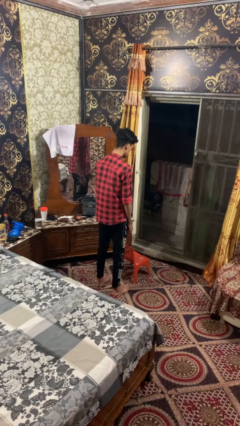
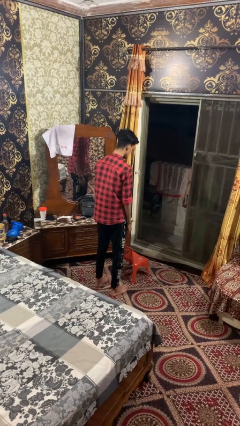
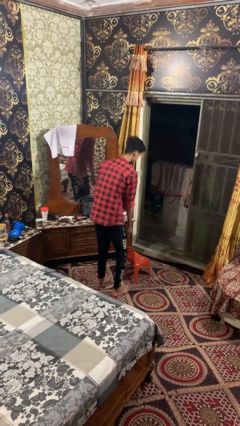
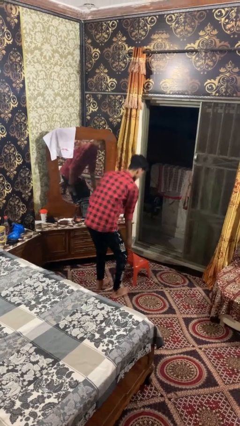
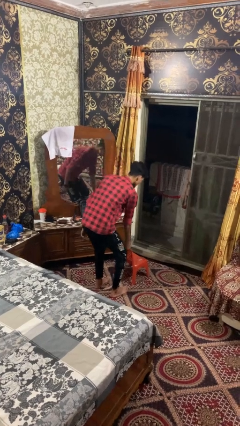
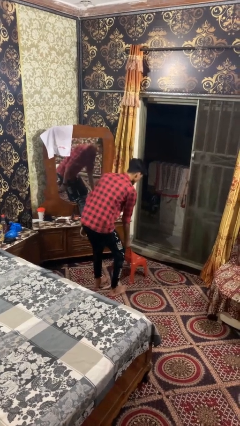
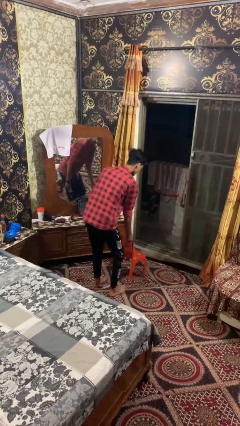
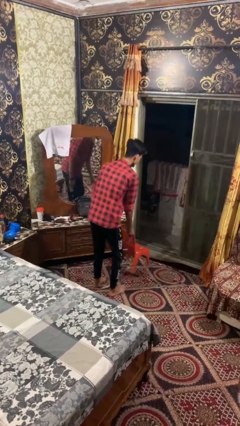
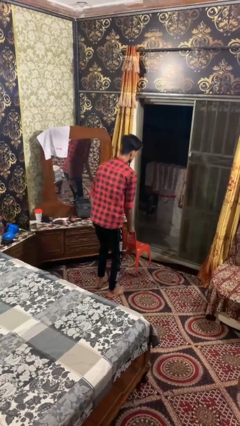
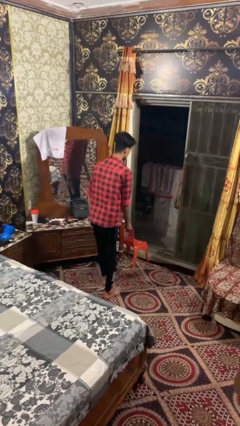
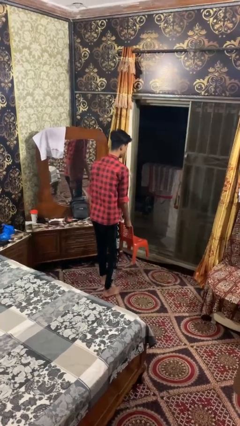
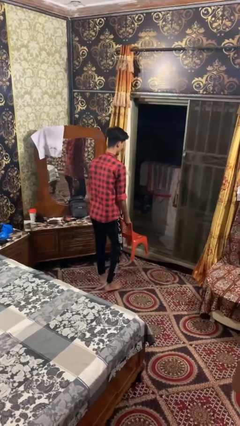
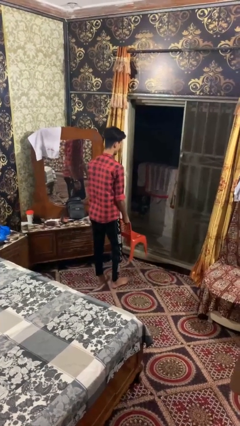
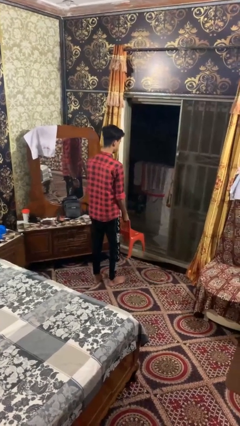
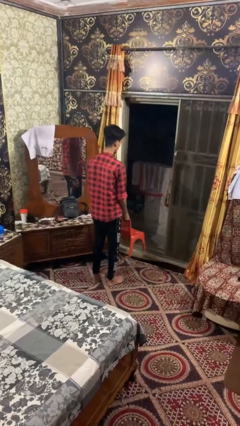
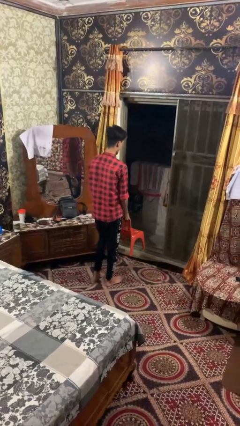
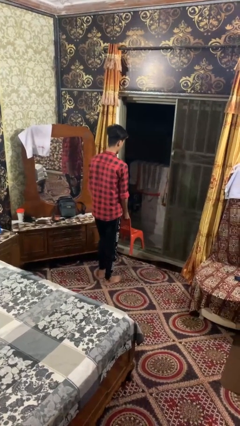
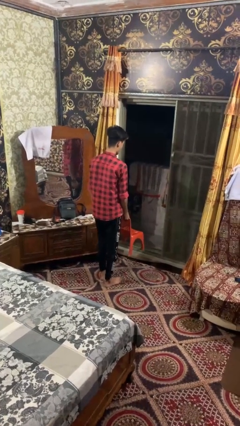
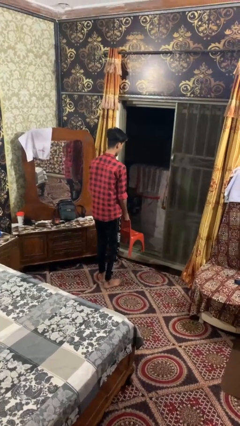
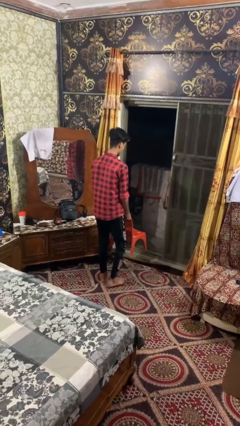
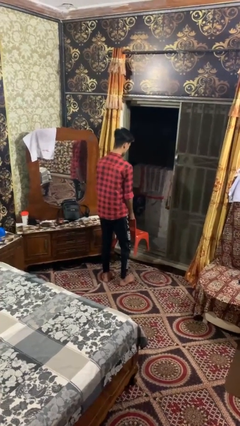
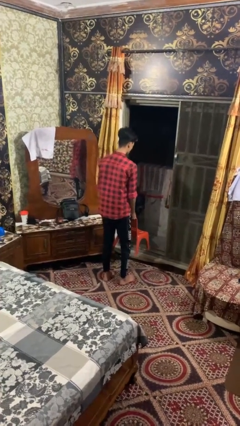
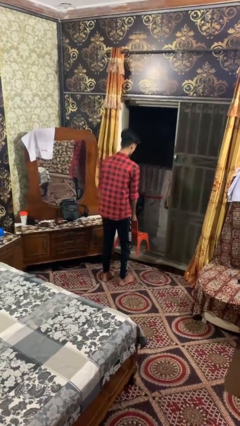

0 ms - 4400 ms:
person carries furniture

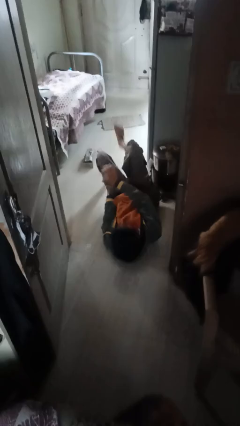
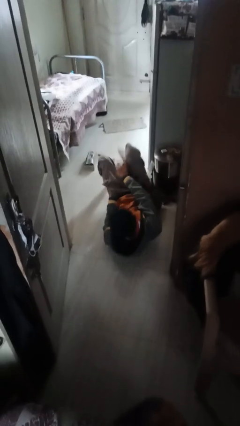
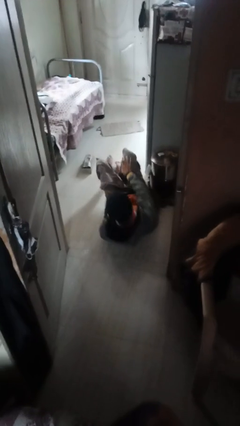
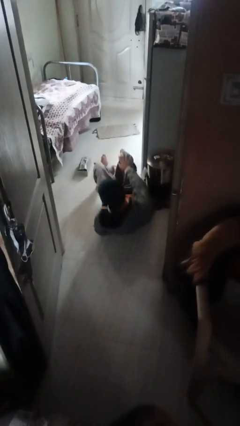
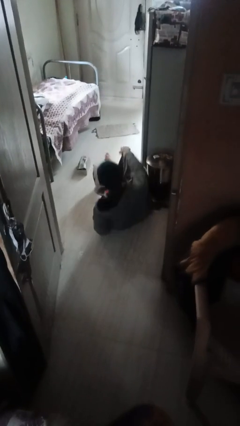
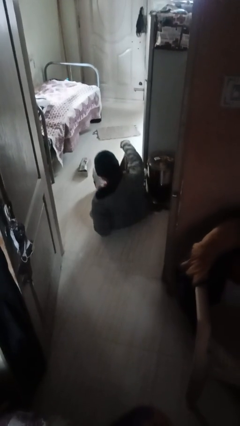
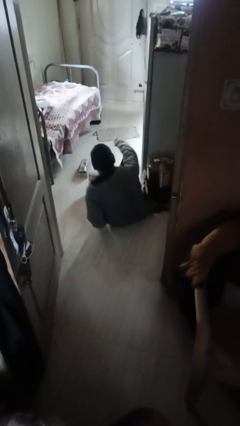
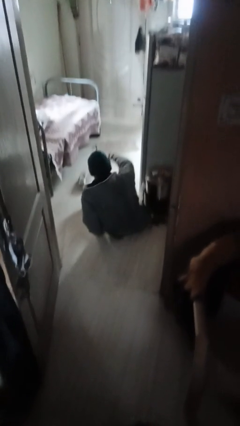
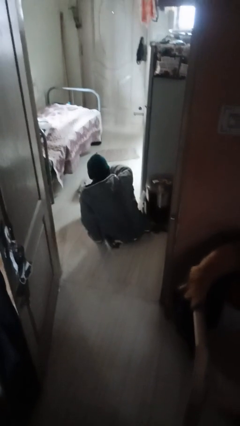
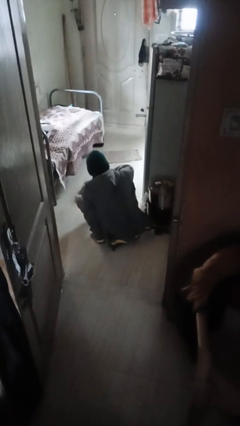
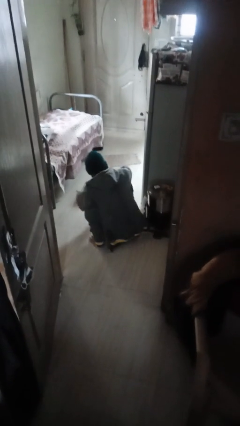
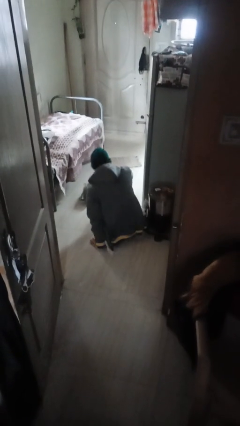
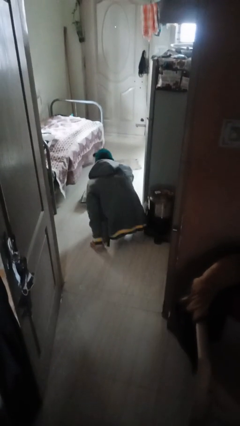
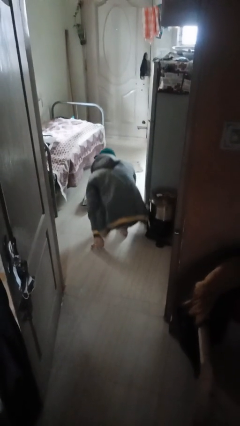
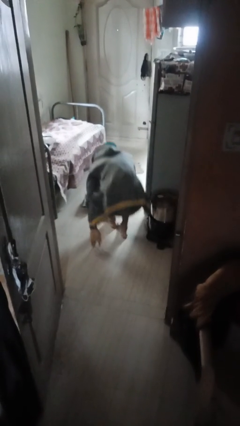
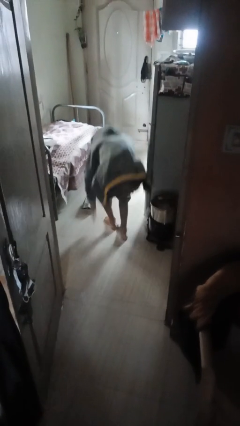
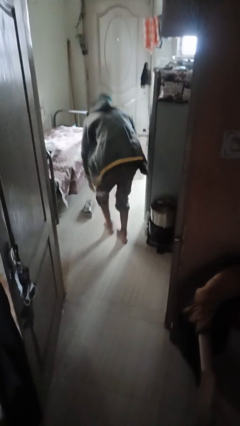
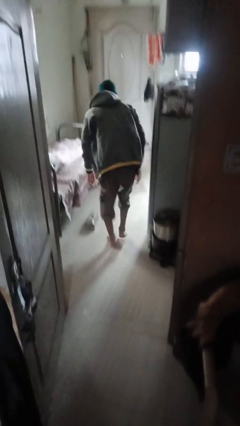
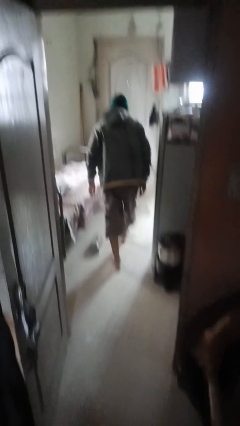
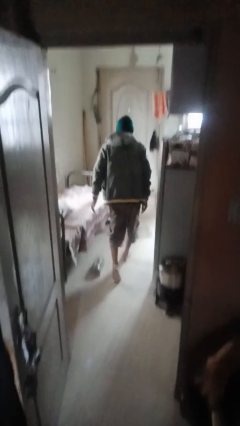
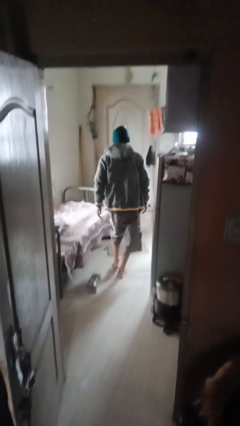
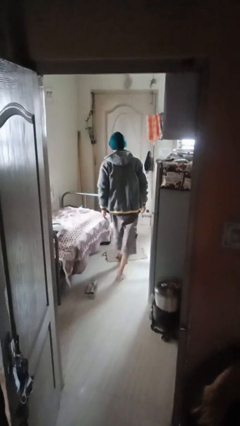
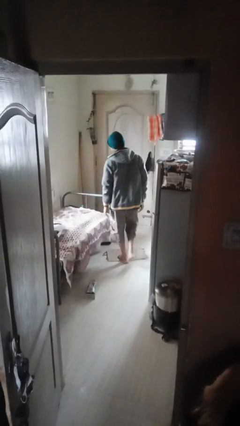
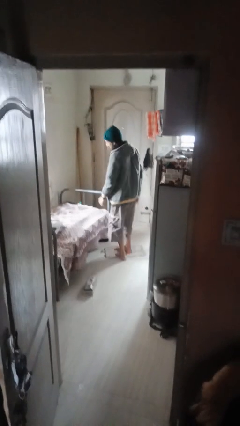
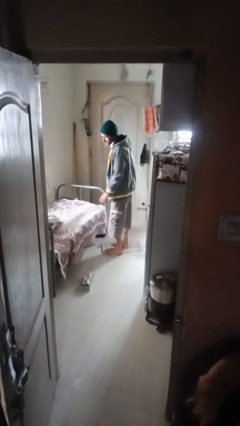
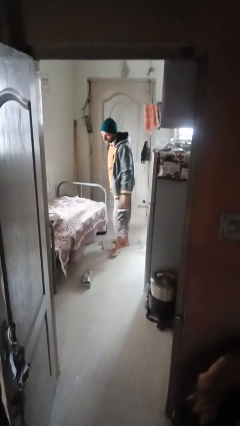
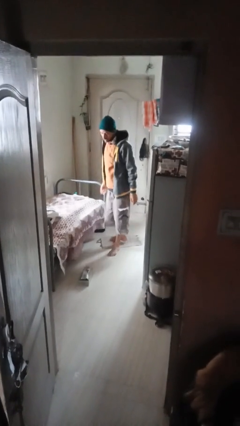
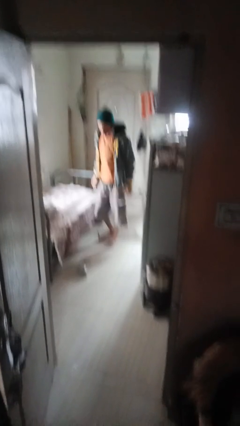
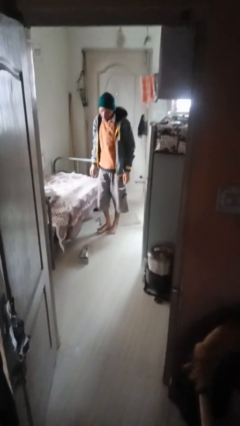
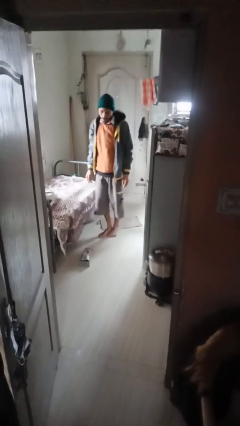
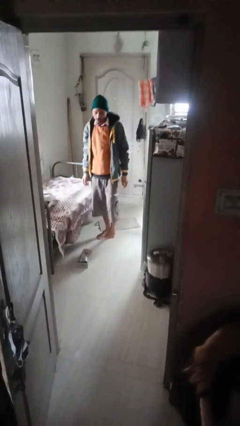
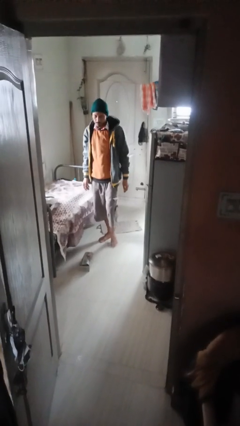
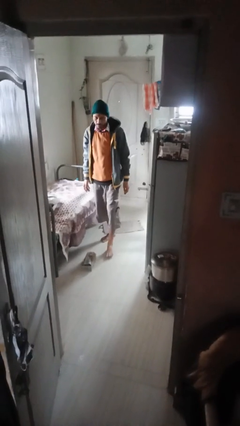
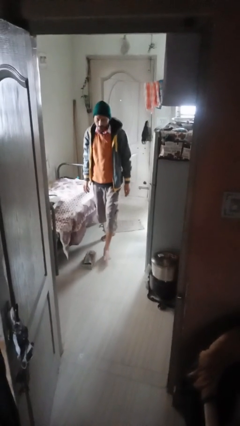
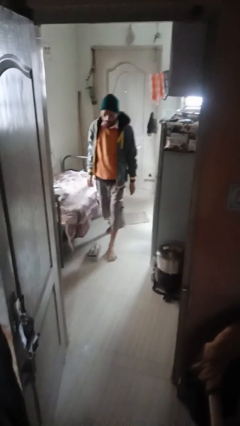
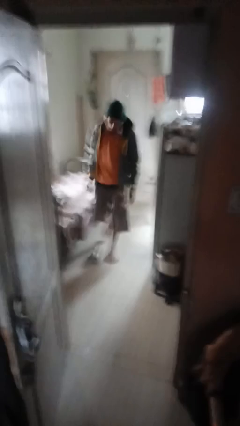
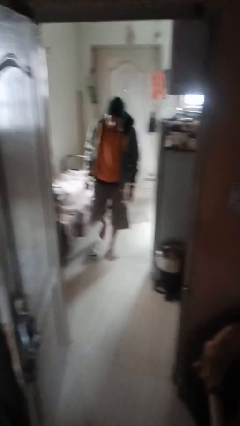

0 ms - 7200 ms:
person stands up from floor

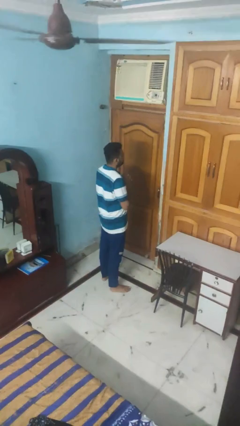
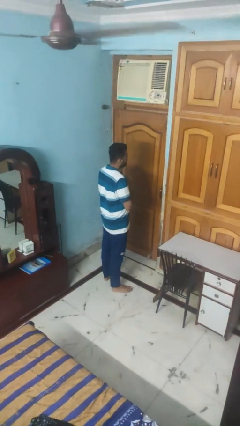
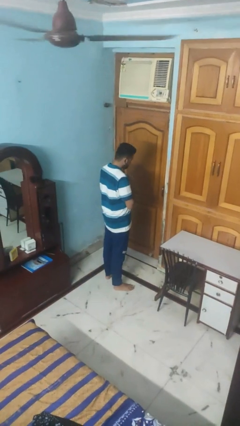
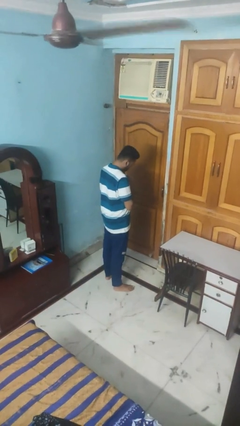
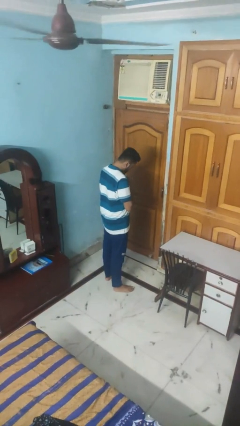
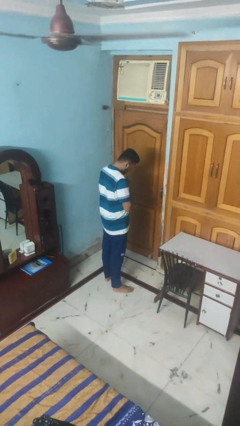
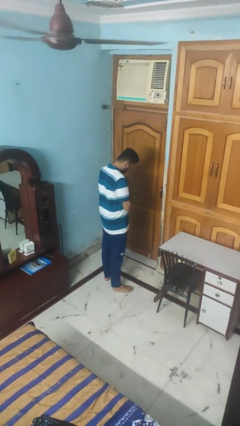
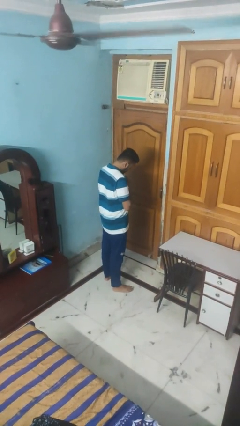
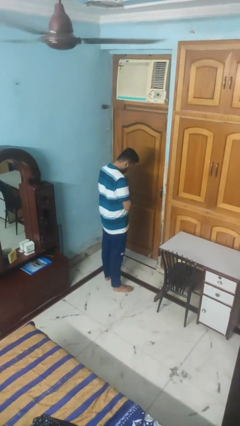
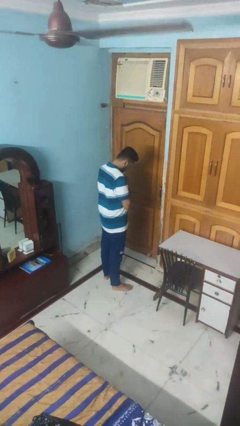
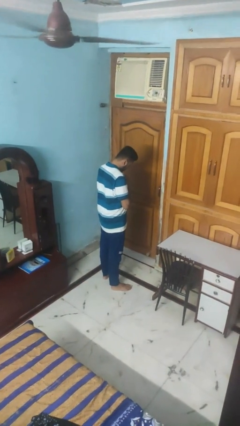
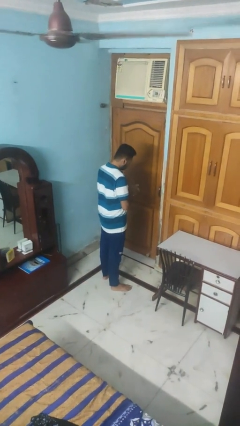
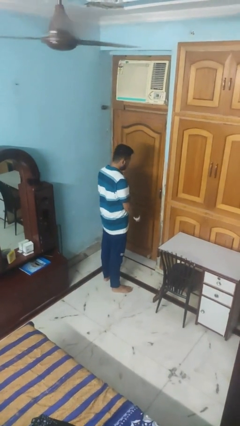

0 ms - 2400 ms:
person prays

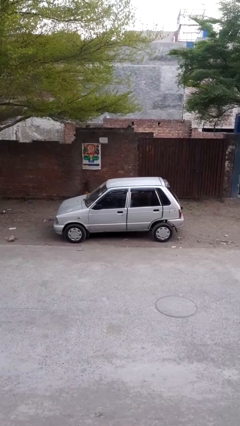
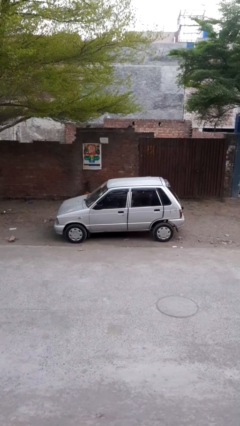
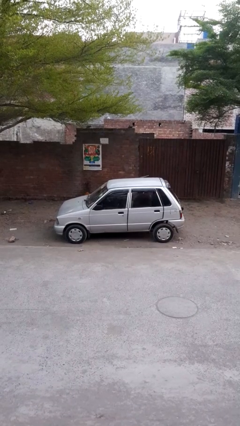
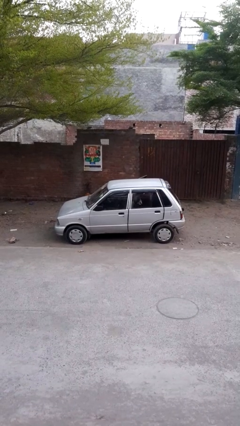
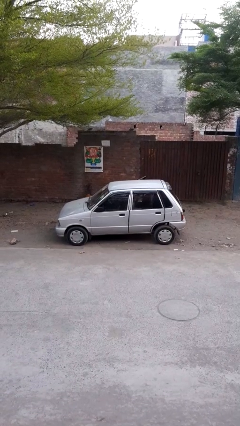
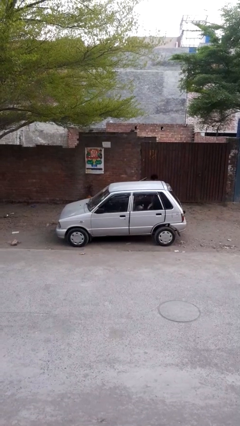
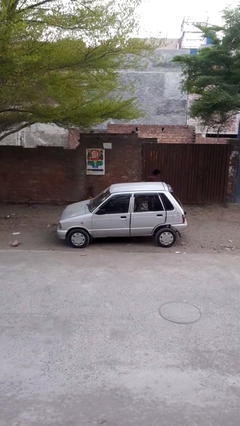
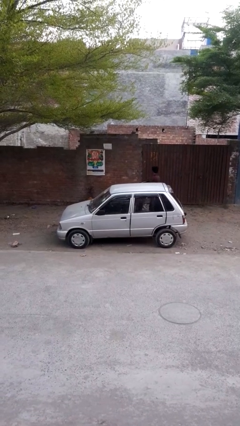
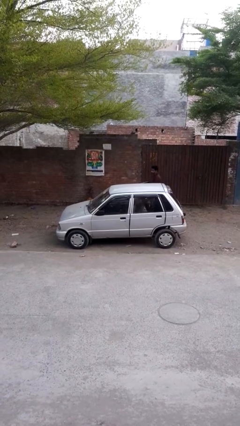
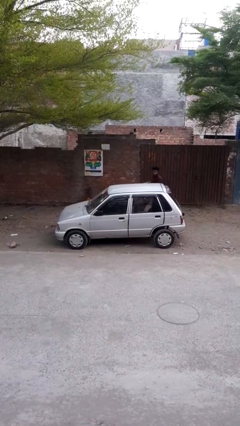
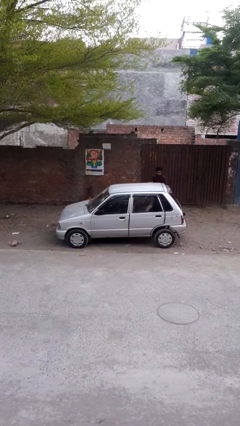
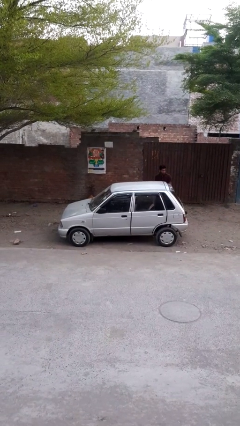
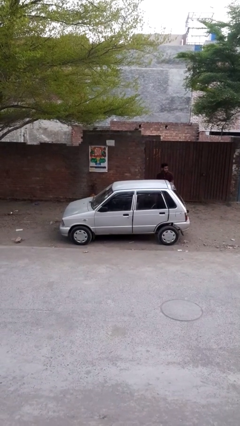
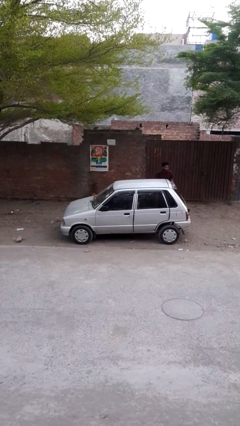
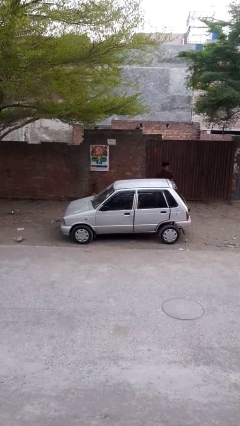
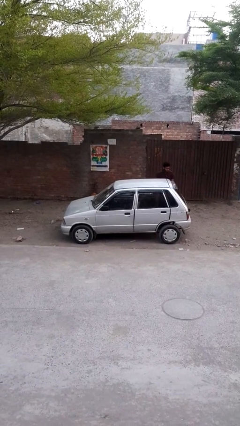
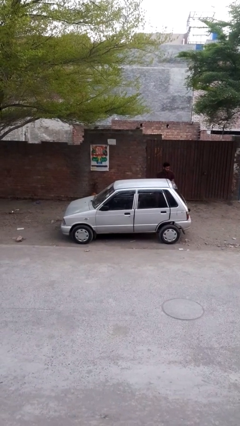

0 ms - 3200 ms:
car drops off person

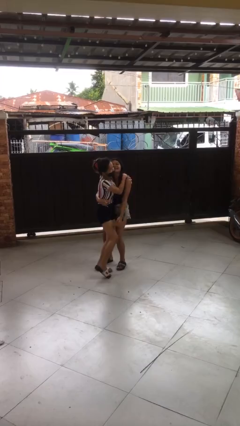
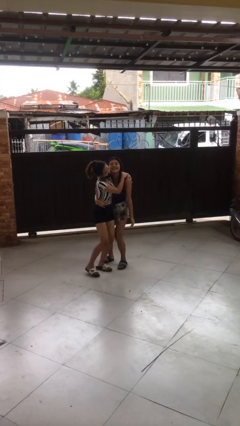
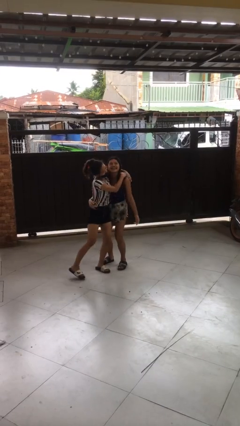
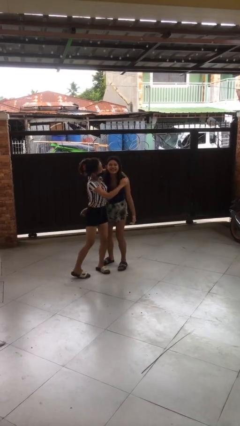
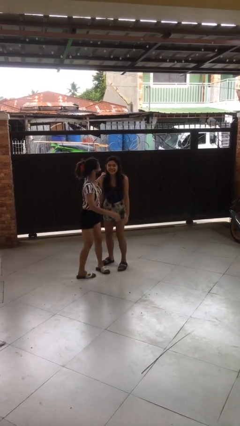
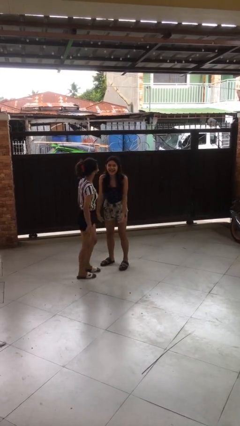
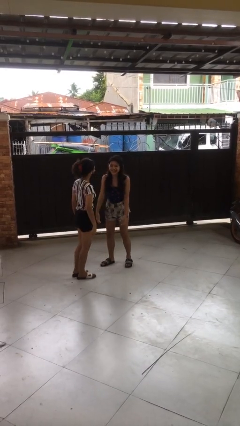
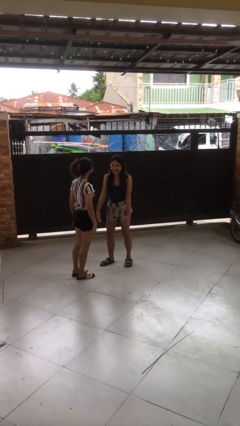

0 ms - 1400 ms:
person puts down person
